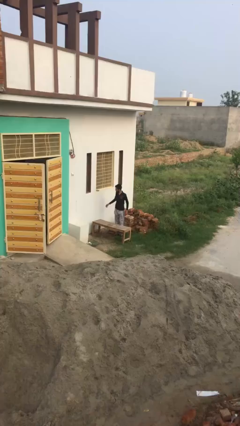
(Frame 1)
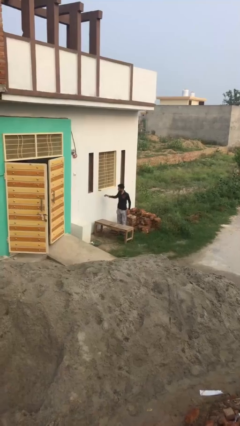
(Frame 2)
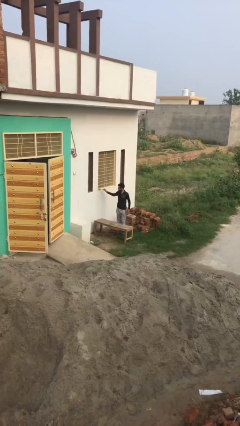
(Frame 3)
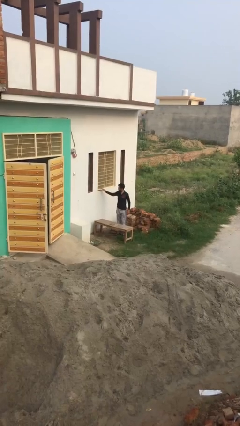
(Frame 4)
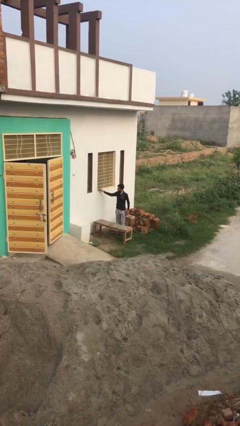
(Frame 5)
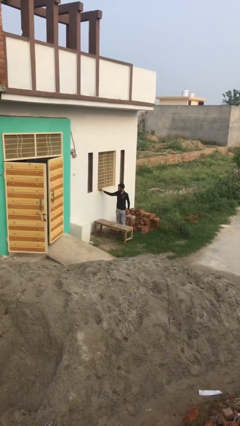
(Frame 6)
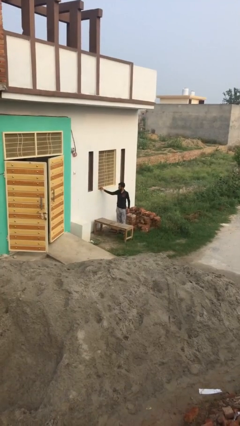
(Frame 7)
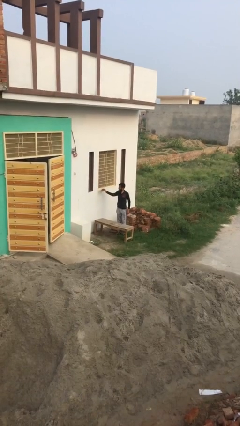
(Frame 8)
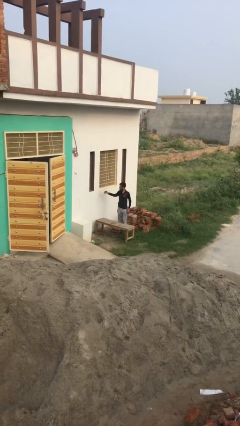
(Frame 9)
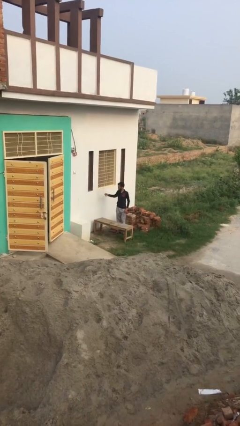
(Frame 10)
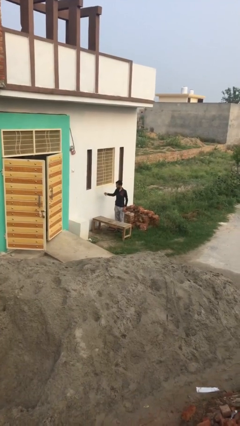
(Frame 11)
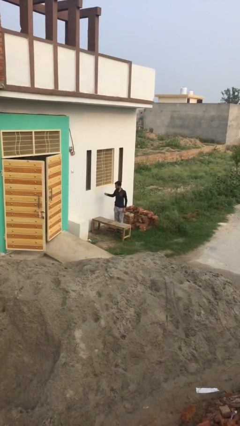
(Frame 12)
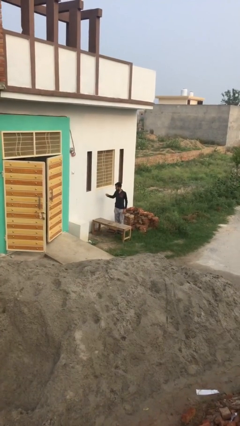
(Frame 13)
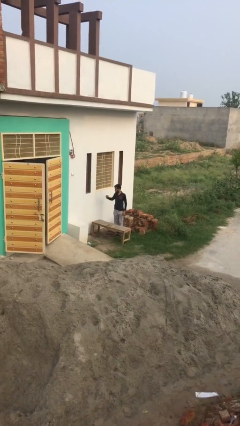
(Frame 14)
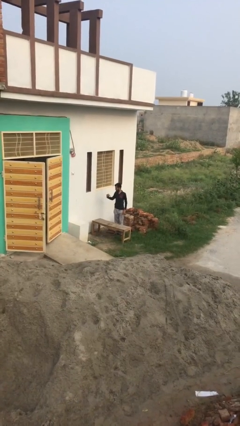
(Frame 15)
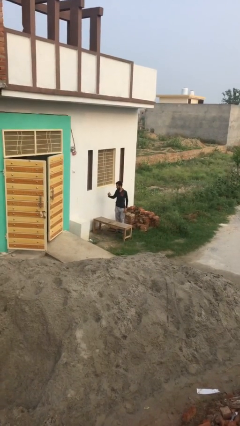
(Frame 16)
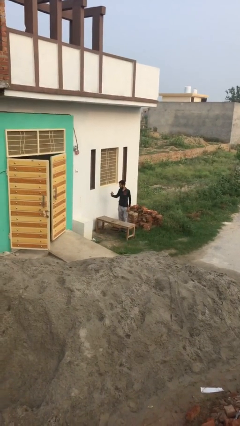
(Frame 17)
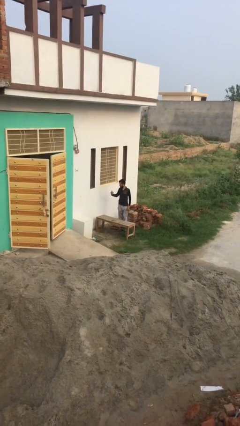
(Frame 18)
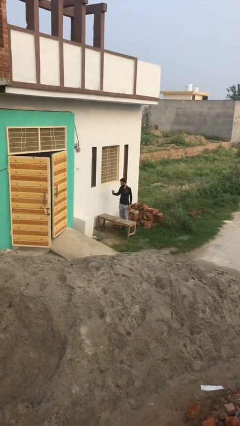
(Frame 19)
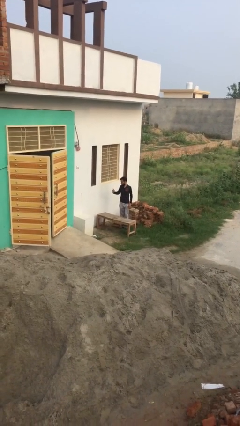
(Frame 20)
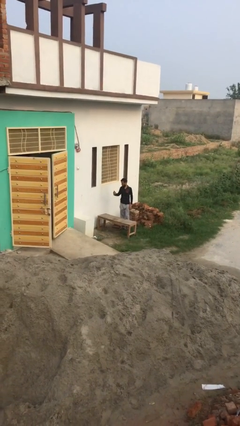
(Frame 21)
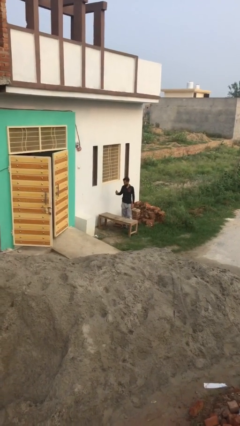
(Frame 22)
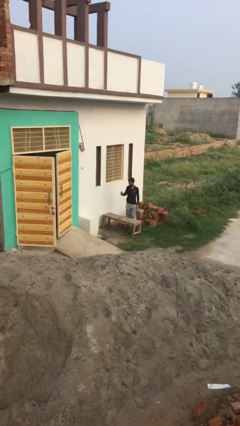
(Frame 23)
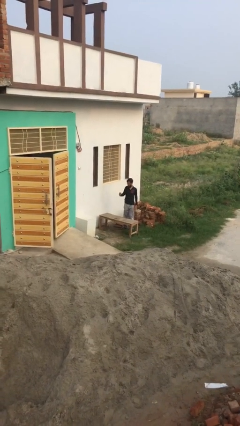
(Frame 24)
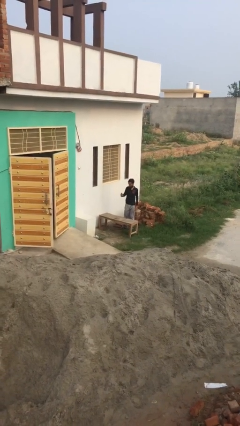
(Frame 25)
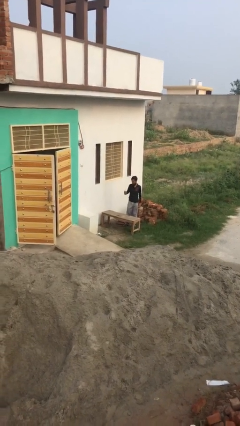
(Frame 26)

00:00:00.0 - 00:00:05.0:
person picks up object from shelf

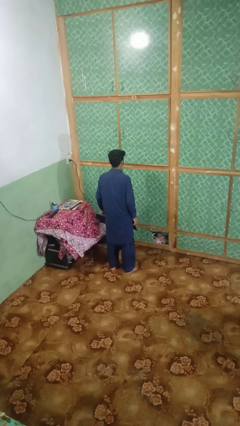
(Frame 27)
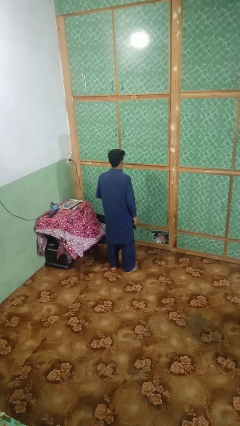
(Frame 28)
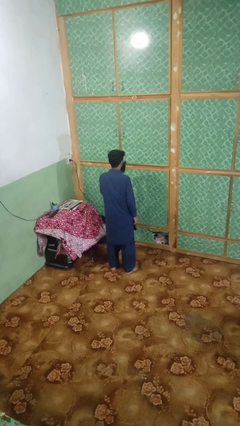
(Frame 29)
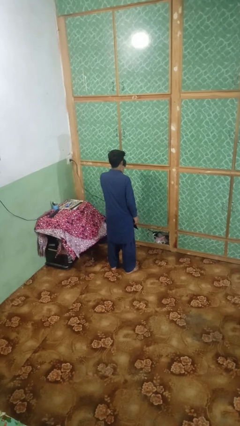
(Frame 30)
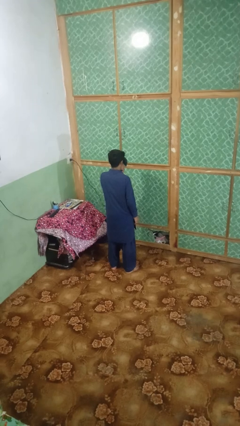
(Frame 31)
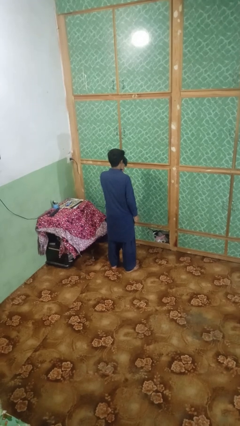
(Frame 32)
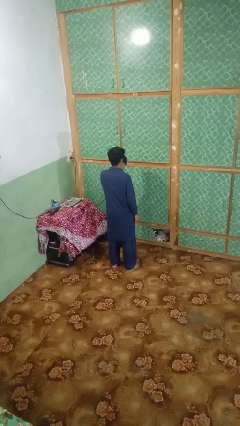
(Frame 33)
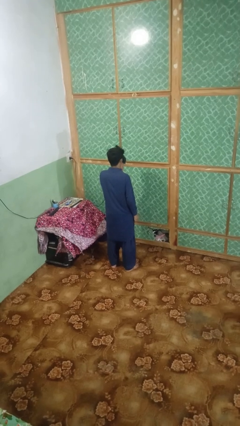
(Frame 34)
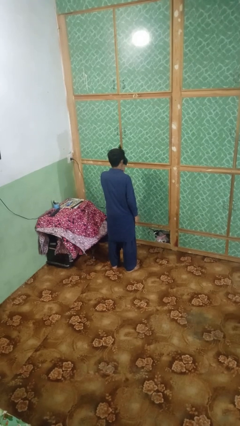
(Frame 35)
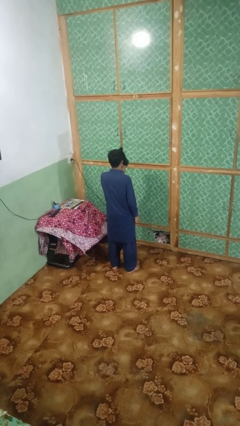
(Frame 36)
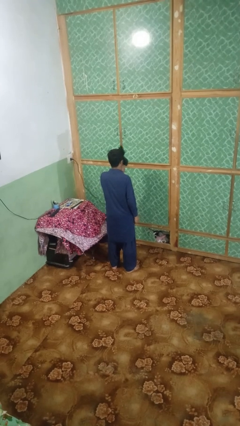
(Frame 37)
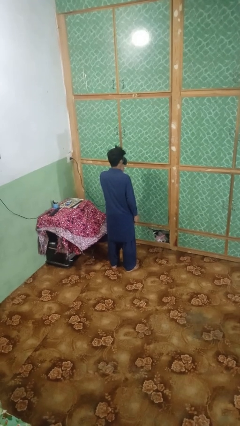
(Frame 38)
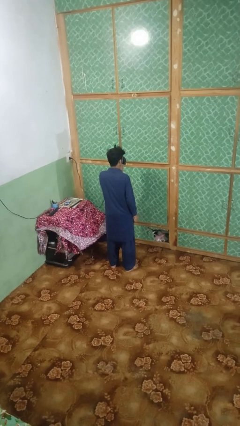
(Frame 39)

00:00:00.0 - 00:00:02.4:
person dries hair with hairdryer

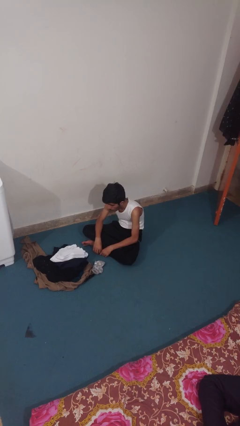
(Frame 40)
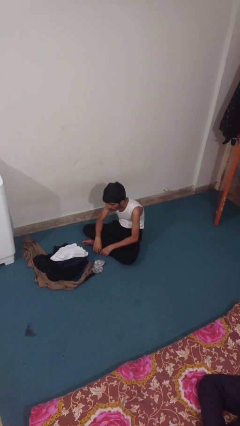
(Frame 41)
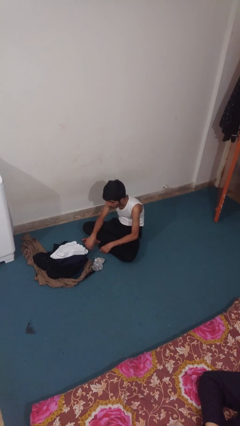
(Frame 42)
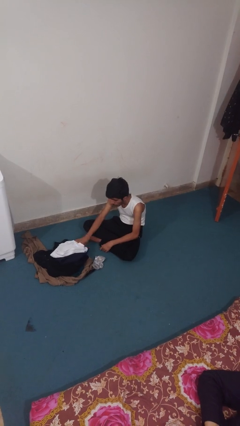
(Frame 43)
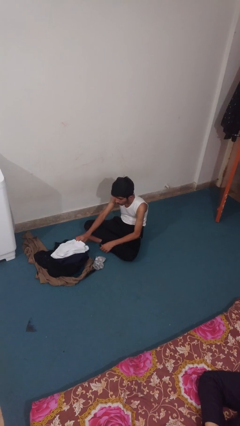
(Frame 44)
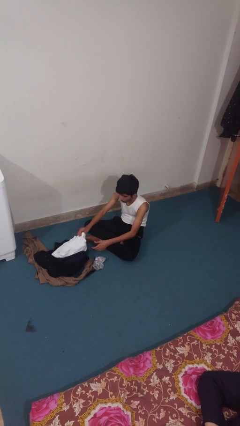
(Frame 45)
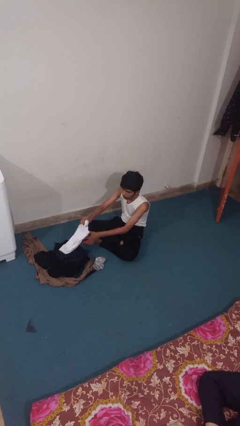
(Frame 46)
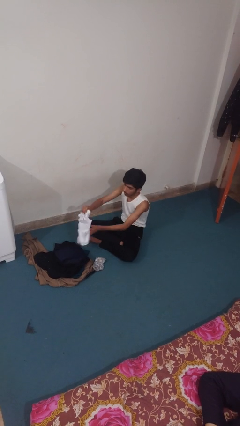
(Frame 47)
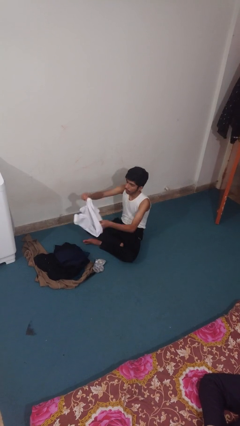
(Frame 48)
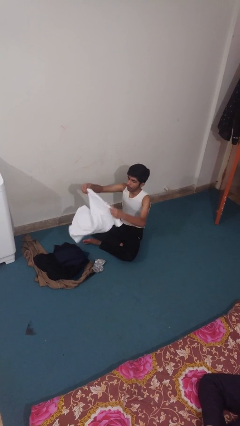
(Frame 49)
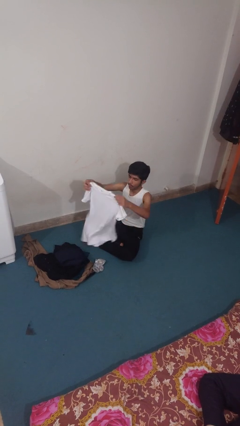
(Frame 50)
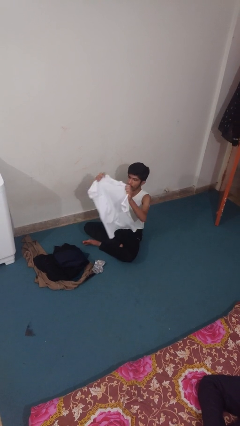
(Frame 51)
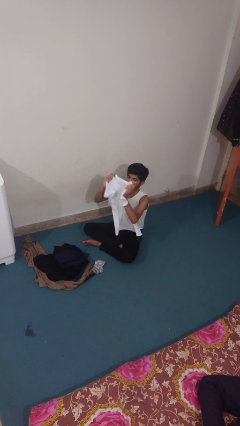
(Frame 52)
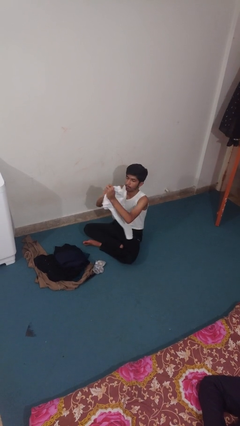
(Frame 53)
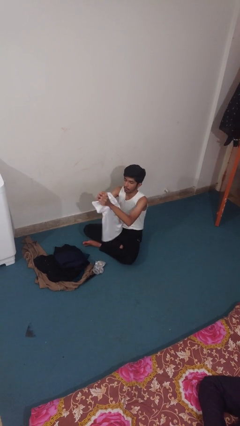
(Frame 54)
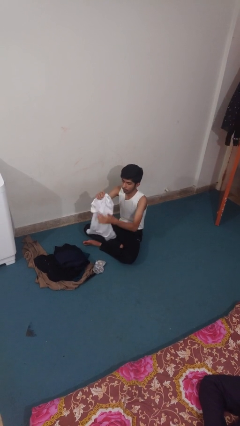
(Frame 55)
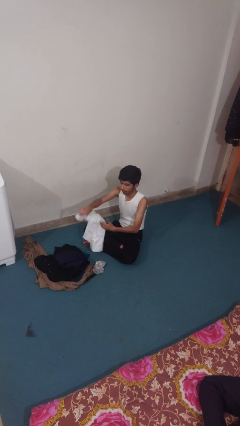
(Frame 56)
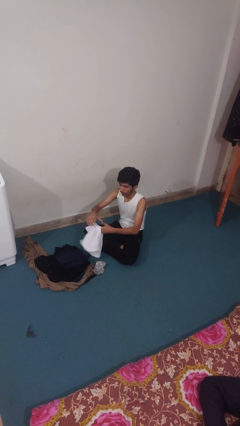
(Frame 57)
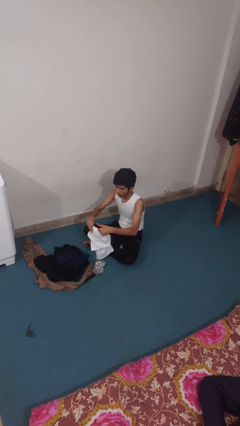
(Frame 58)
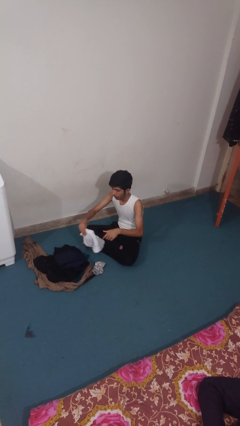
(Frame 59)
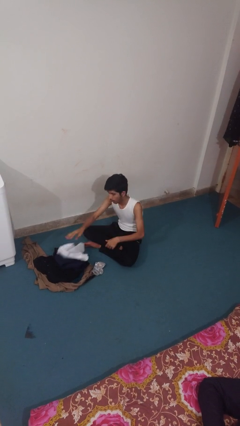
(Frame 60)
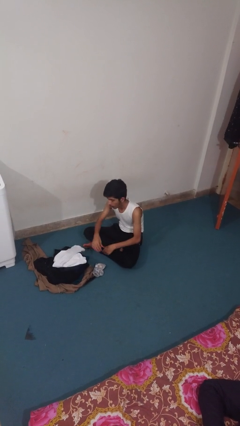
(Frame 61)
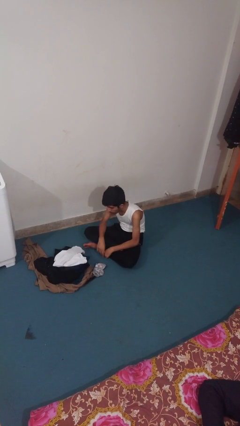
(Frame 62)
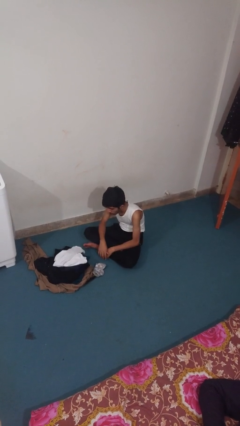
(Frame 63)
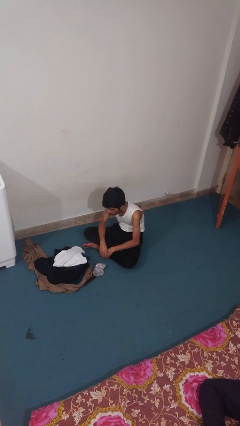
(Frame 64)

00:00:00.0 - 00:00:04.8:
person folds shirt

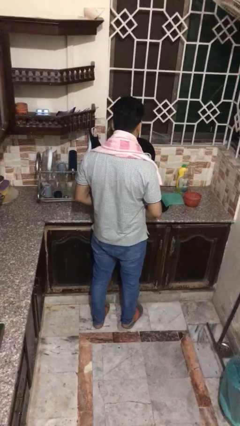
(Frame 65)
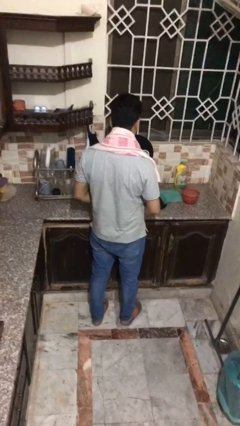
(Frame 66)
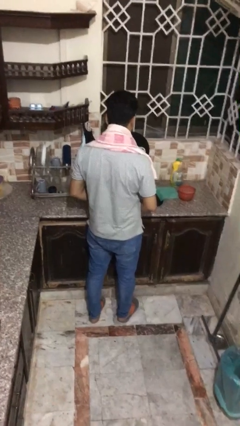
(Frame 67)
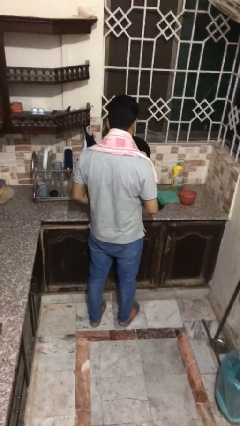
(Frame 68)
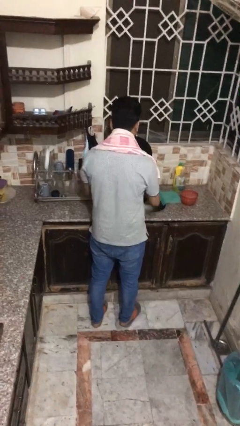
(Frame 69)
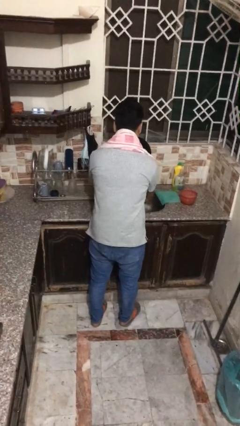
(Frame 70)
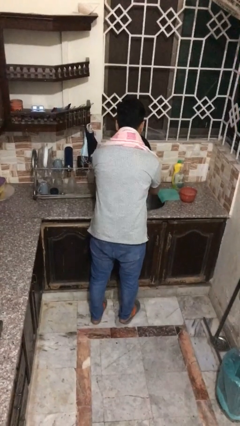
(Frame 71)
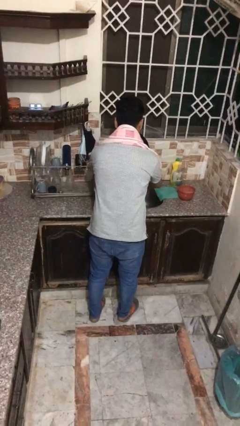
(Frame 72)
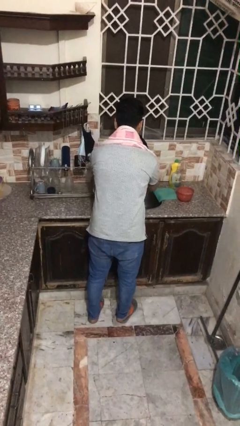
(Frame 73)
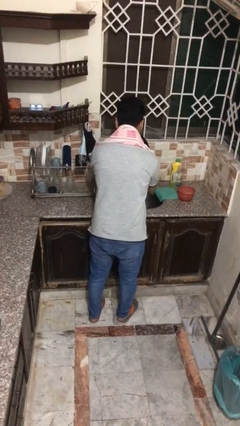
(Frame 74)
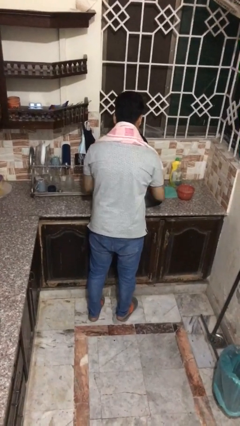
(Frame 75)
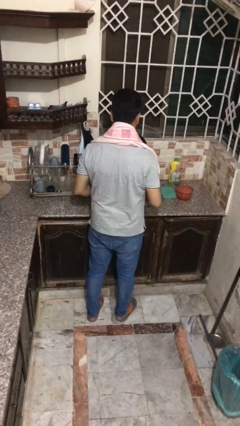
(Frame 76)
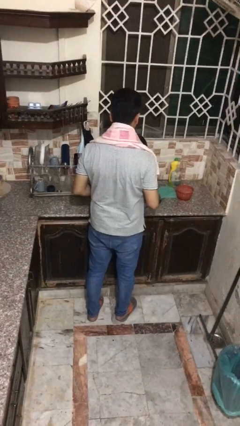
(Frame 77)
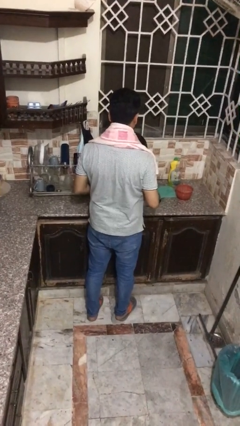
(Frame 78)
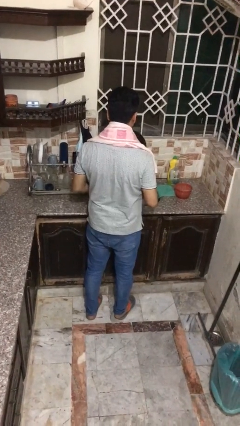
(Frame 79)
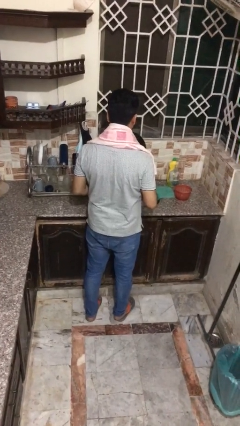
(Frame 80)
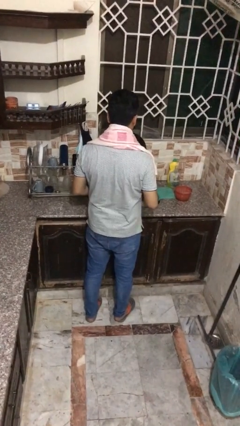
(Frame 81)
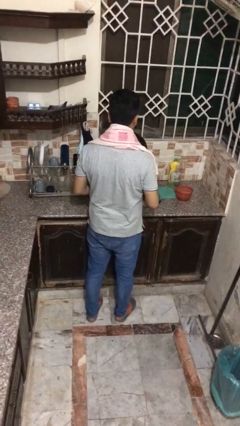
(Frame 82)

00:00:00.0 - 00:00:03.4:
person washes face

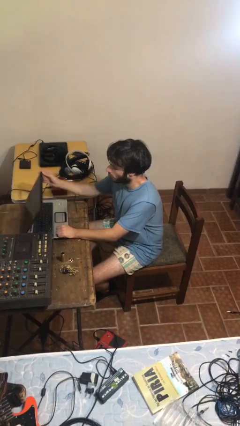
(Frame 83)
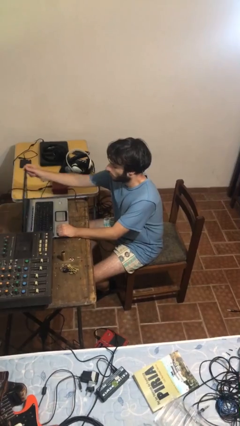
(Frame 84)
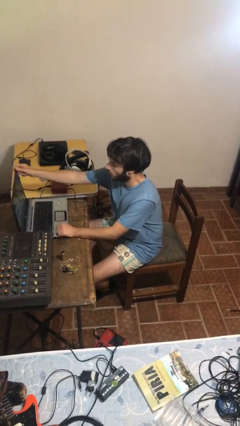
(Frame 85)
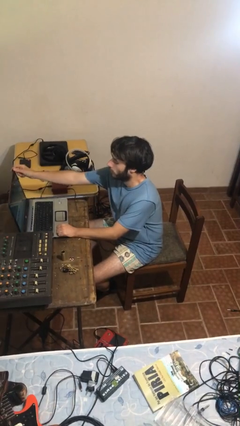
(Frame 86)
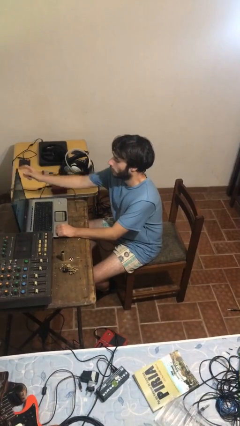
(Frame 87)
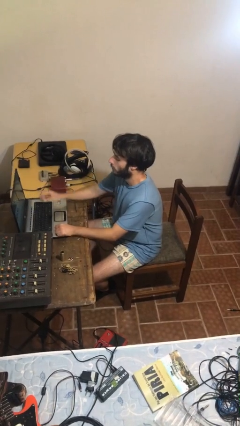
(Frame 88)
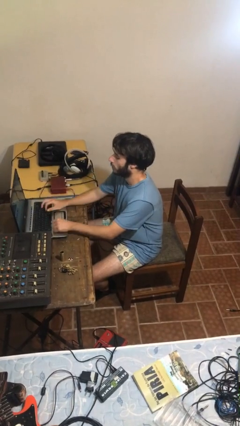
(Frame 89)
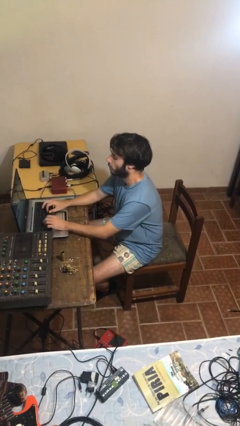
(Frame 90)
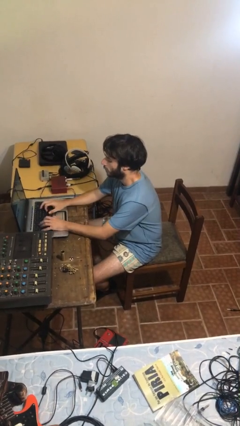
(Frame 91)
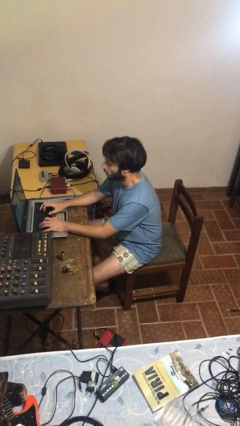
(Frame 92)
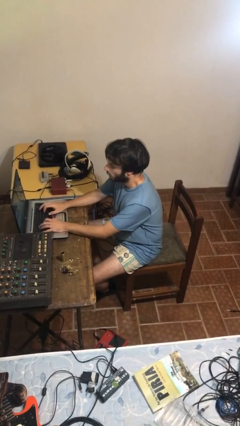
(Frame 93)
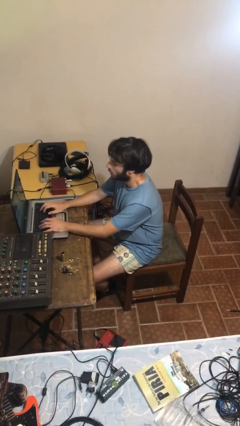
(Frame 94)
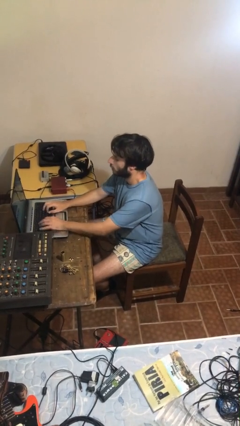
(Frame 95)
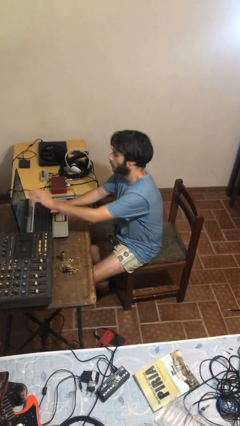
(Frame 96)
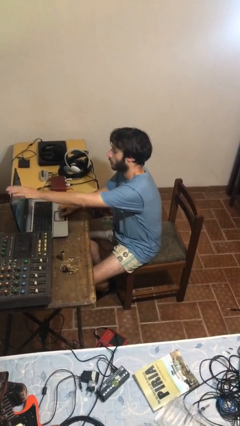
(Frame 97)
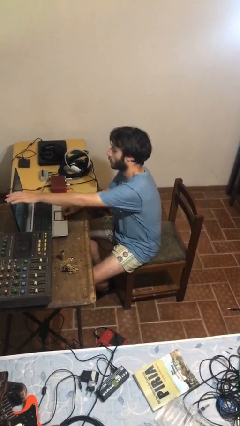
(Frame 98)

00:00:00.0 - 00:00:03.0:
person interacts with laptop
